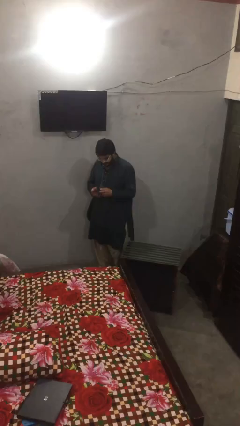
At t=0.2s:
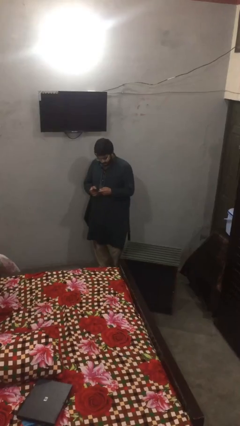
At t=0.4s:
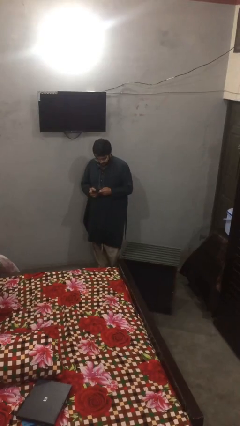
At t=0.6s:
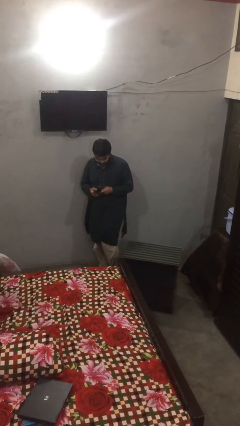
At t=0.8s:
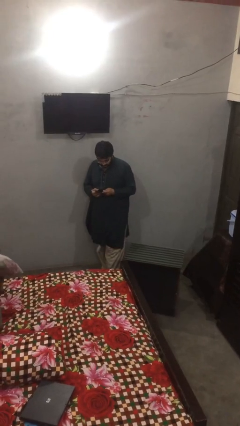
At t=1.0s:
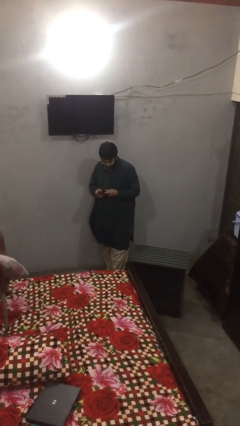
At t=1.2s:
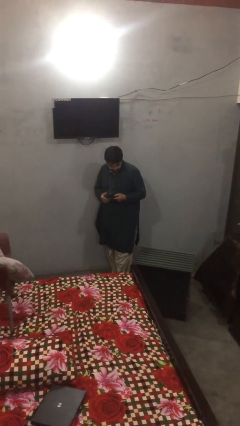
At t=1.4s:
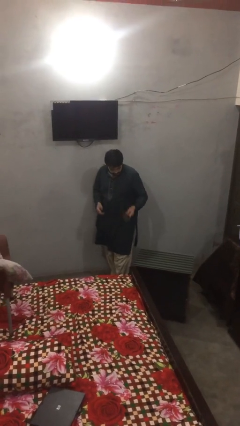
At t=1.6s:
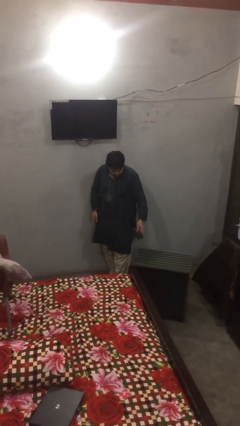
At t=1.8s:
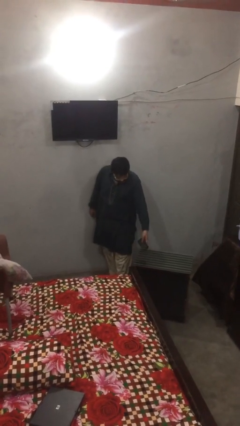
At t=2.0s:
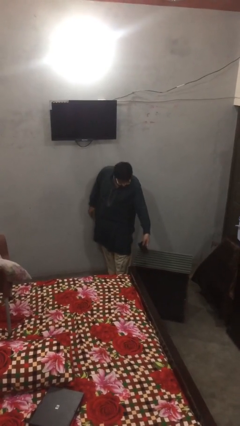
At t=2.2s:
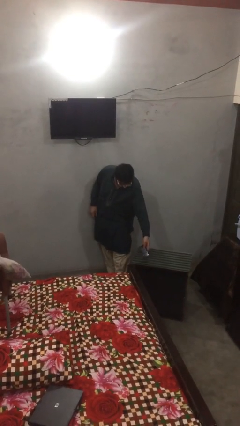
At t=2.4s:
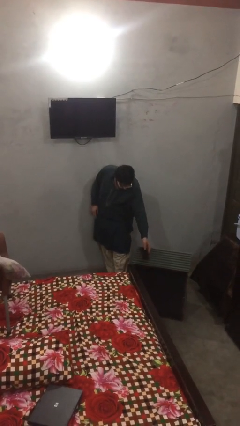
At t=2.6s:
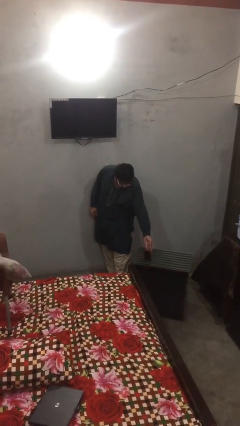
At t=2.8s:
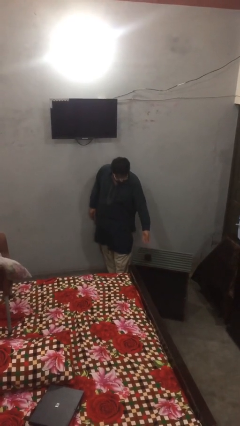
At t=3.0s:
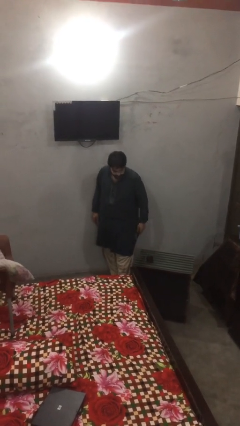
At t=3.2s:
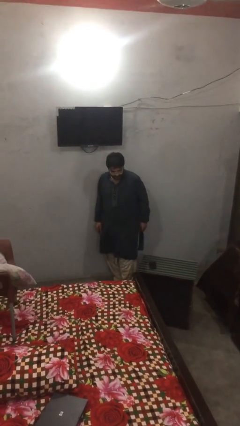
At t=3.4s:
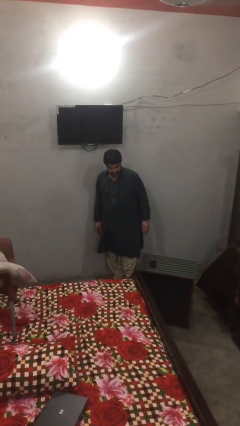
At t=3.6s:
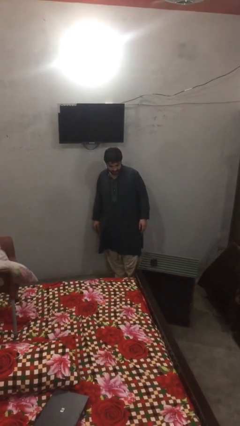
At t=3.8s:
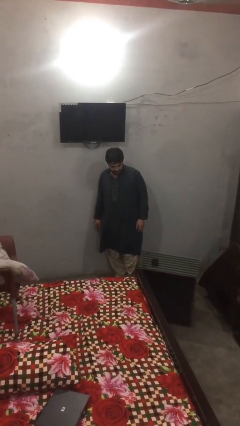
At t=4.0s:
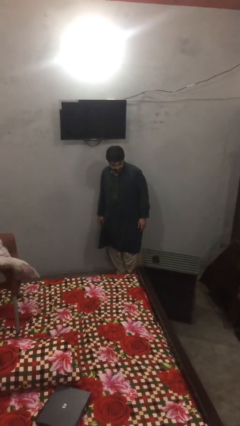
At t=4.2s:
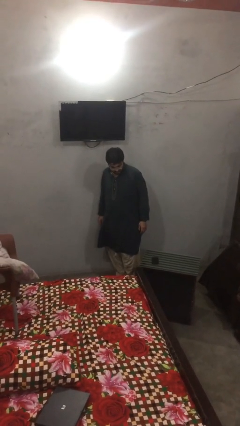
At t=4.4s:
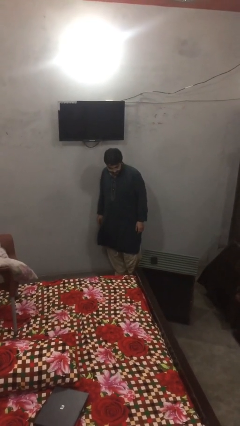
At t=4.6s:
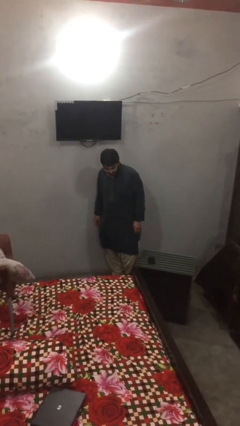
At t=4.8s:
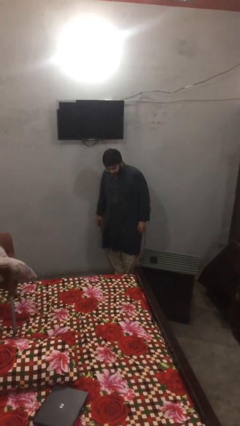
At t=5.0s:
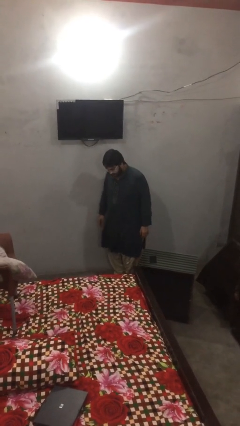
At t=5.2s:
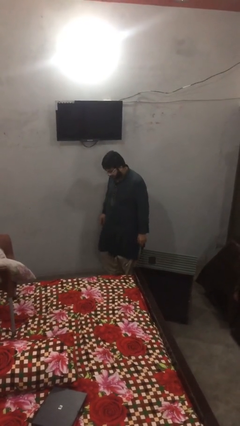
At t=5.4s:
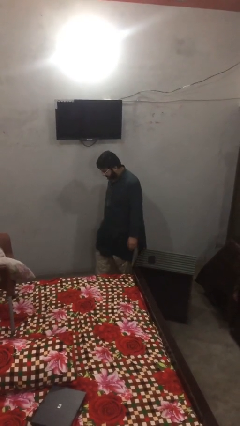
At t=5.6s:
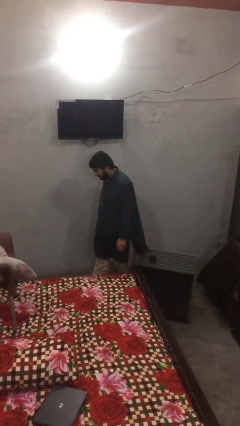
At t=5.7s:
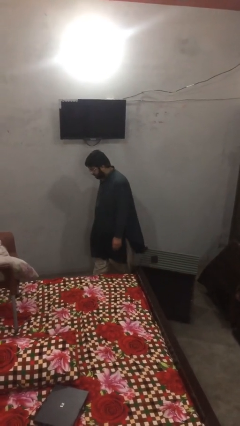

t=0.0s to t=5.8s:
person puts down object on table

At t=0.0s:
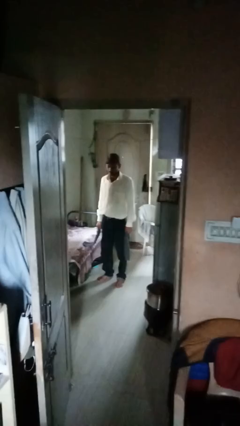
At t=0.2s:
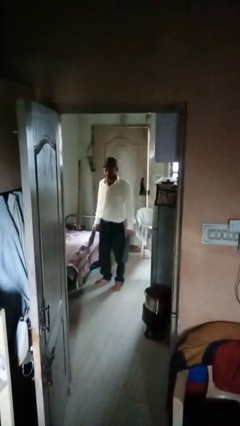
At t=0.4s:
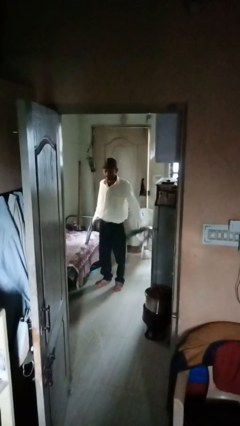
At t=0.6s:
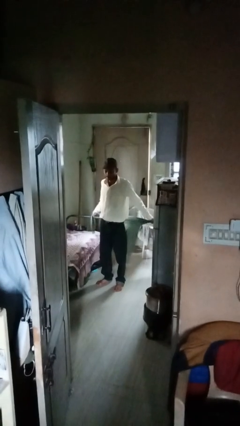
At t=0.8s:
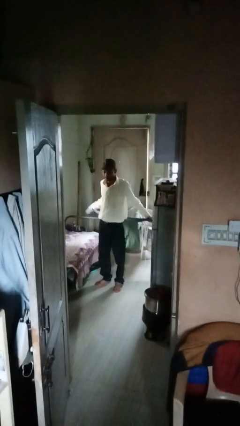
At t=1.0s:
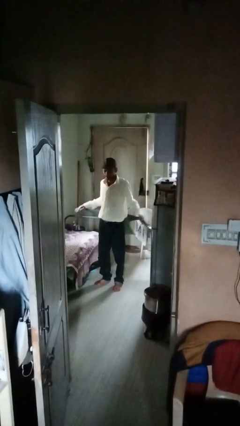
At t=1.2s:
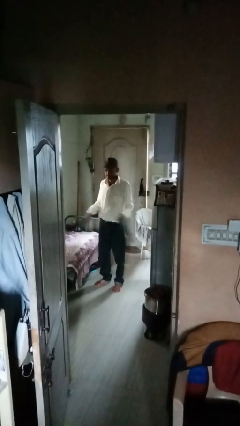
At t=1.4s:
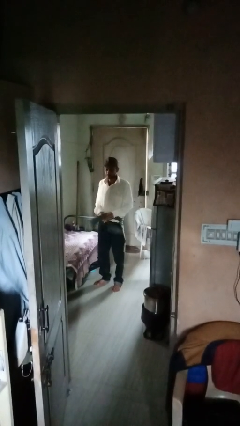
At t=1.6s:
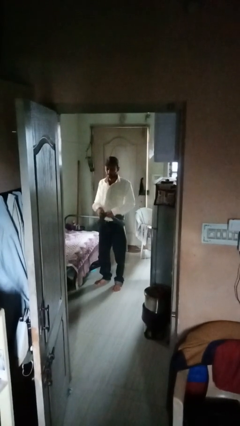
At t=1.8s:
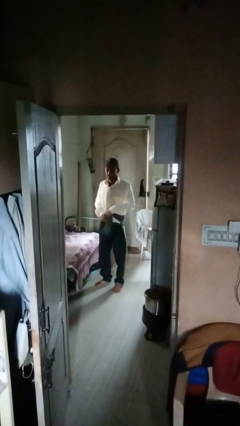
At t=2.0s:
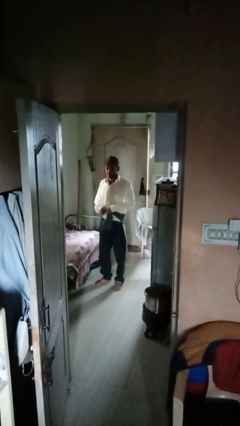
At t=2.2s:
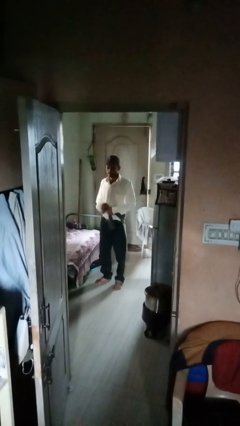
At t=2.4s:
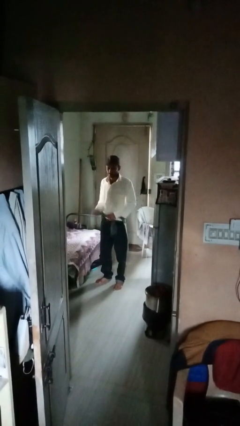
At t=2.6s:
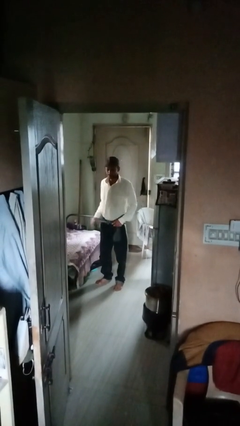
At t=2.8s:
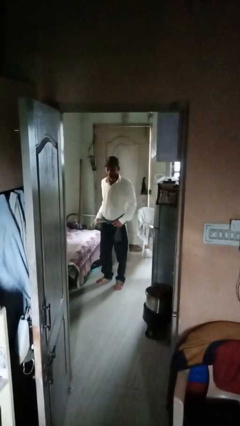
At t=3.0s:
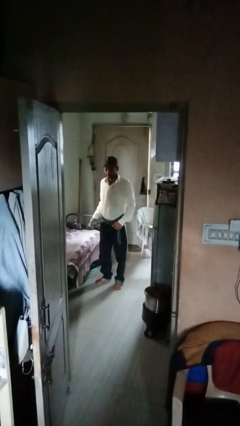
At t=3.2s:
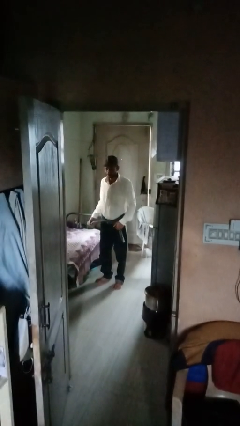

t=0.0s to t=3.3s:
person ties jacket around waist

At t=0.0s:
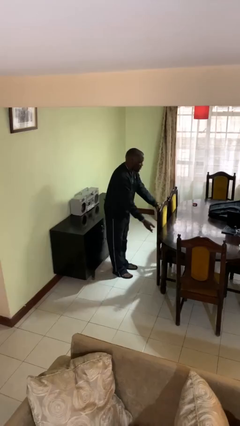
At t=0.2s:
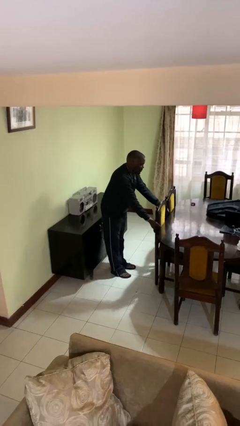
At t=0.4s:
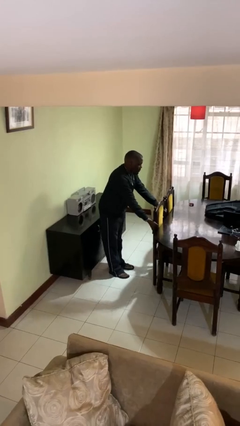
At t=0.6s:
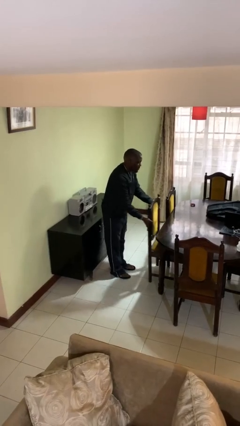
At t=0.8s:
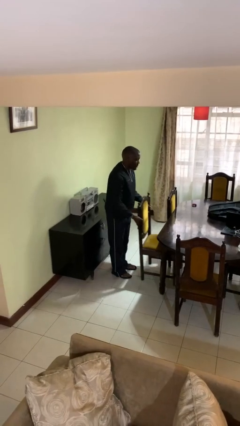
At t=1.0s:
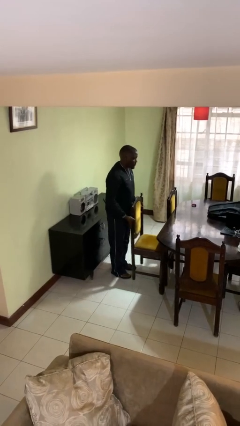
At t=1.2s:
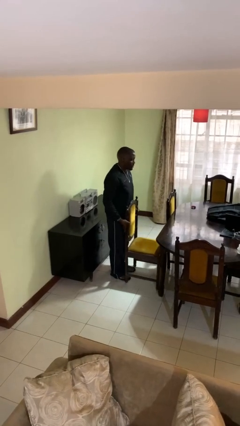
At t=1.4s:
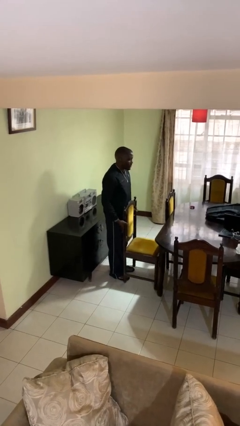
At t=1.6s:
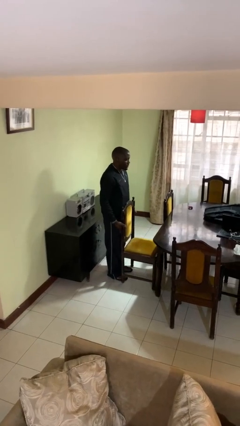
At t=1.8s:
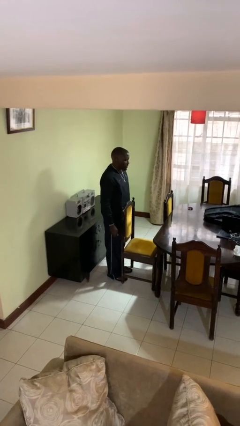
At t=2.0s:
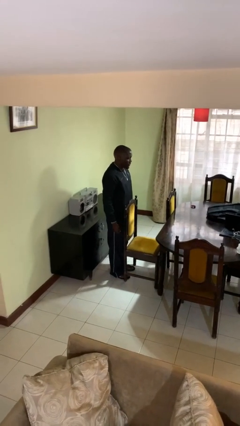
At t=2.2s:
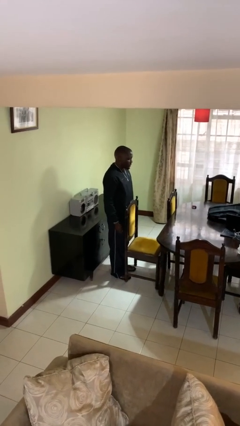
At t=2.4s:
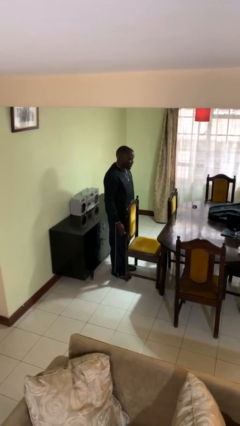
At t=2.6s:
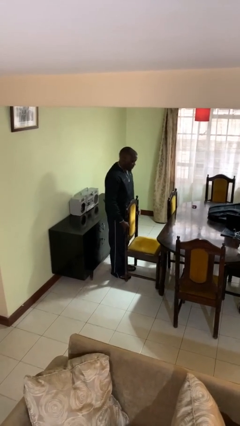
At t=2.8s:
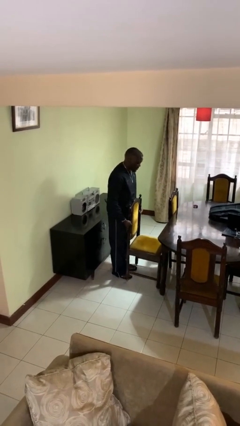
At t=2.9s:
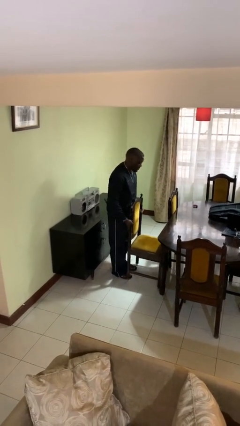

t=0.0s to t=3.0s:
person pulls out chair

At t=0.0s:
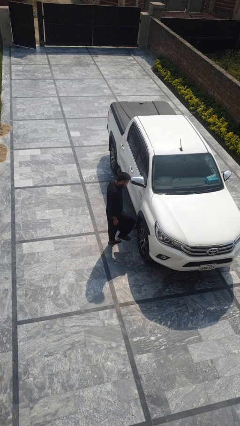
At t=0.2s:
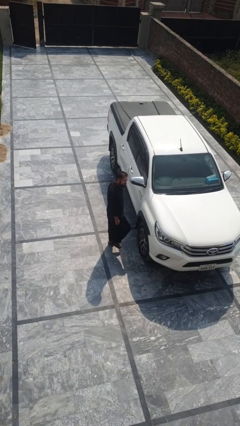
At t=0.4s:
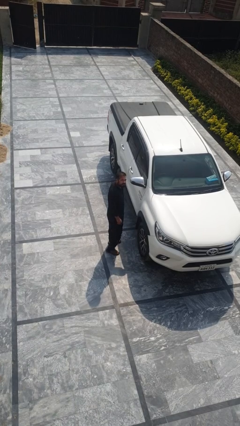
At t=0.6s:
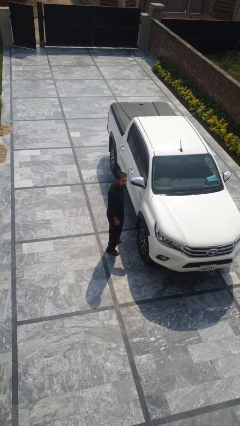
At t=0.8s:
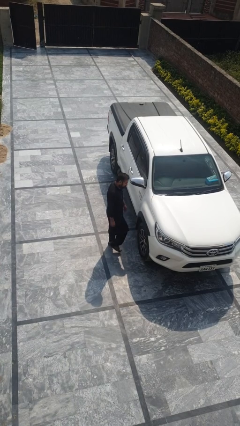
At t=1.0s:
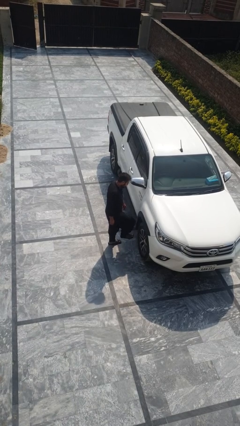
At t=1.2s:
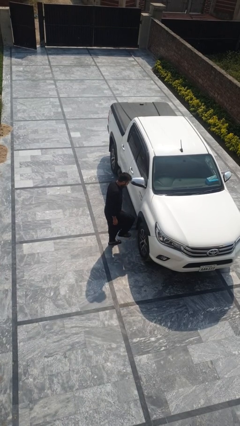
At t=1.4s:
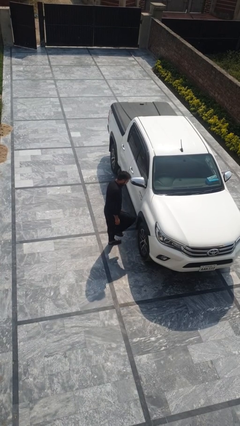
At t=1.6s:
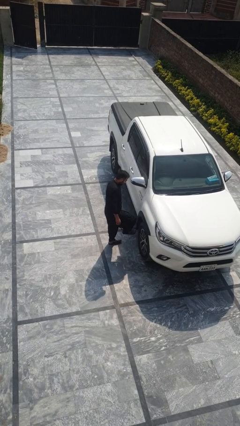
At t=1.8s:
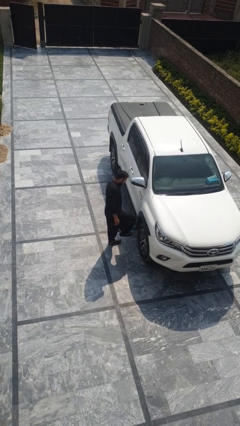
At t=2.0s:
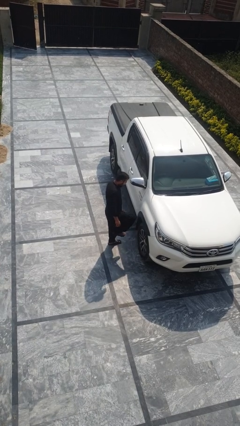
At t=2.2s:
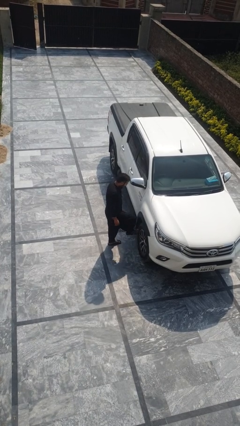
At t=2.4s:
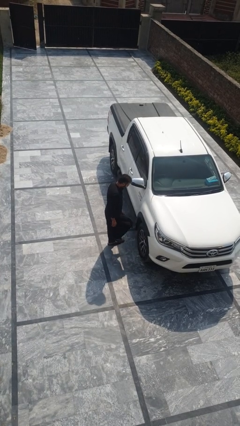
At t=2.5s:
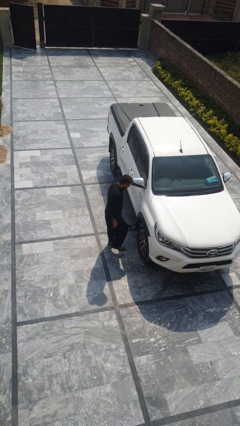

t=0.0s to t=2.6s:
person kicks car tires

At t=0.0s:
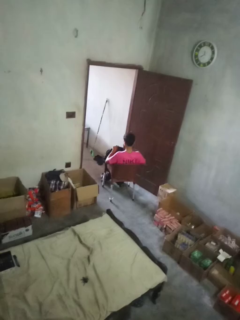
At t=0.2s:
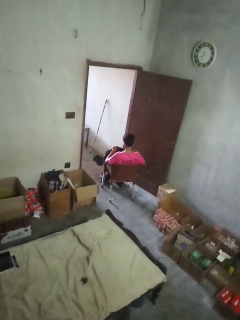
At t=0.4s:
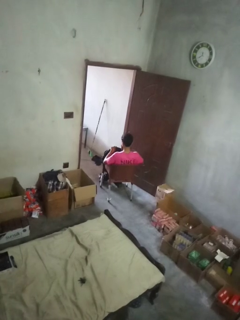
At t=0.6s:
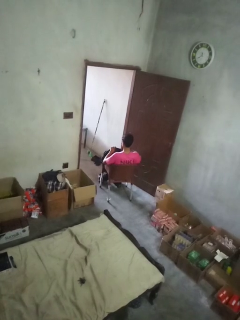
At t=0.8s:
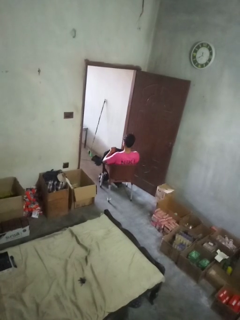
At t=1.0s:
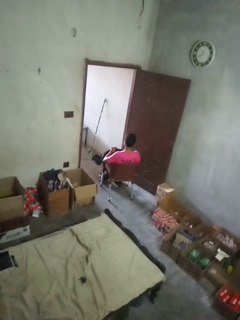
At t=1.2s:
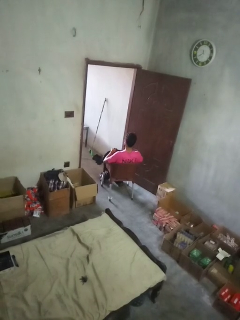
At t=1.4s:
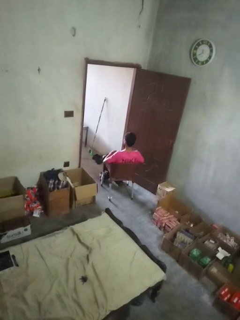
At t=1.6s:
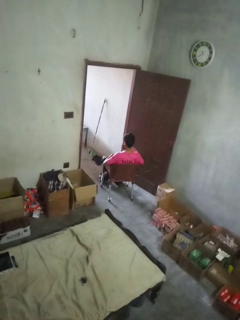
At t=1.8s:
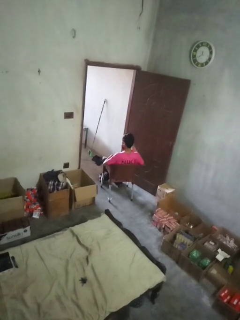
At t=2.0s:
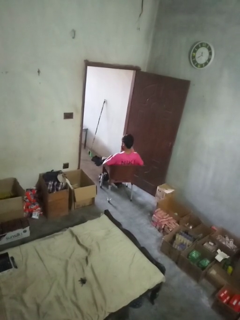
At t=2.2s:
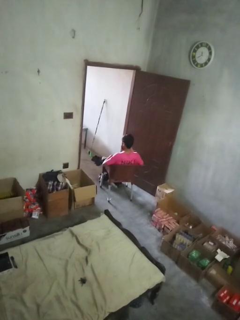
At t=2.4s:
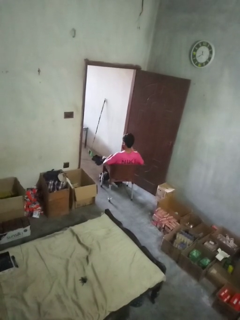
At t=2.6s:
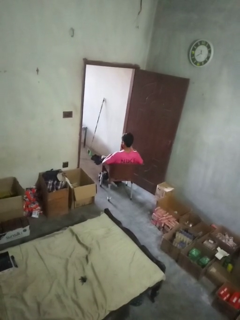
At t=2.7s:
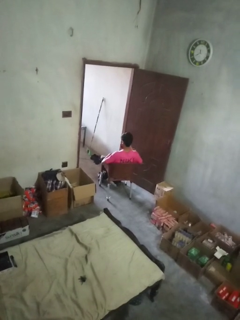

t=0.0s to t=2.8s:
person takes object from backpack

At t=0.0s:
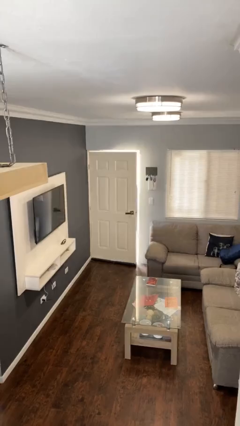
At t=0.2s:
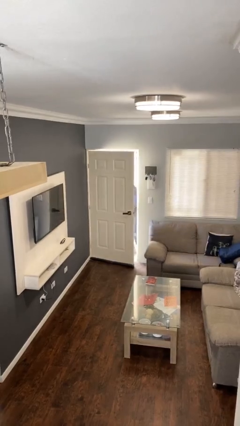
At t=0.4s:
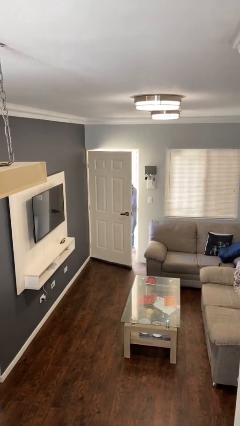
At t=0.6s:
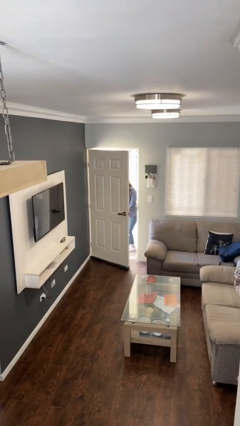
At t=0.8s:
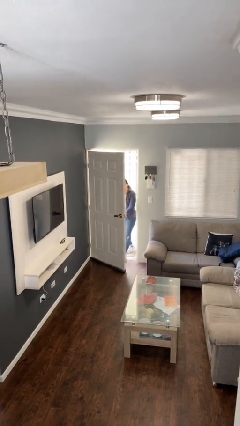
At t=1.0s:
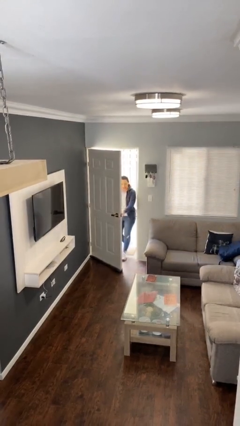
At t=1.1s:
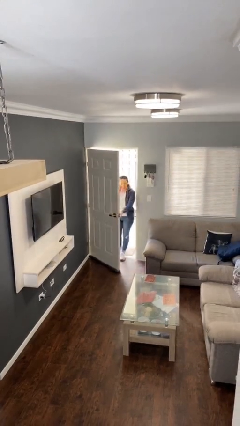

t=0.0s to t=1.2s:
person opens facility door
